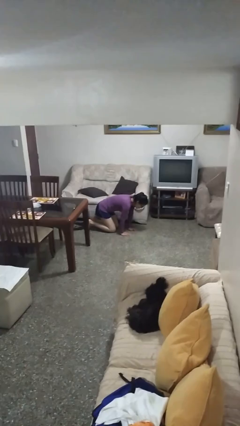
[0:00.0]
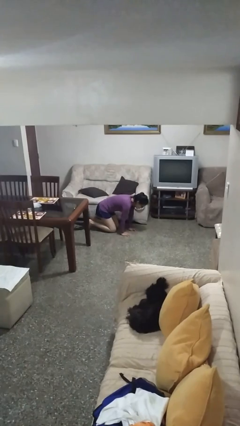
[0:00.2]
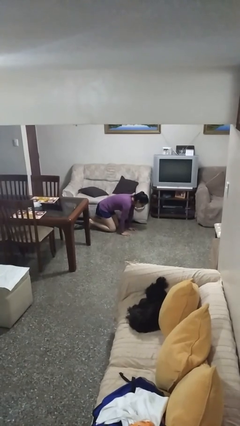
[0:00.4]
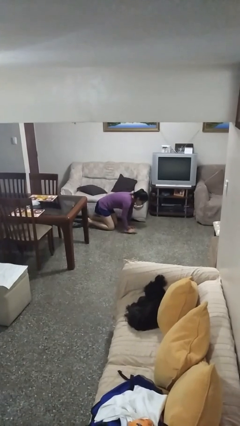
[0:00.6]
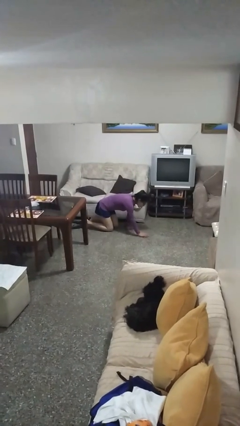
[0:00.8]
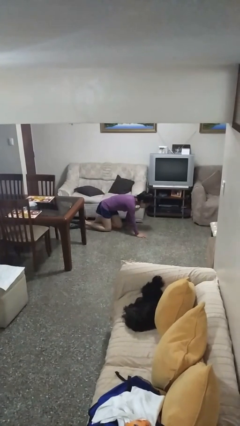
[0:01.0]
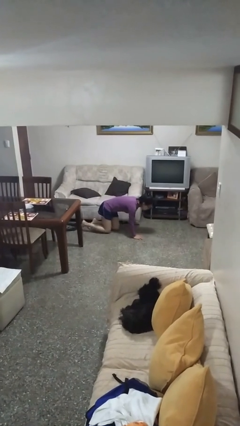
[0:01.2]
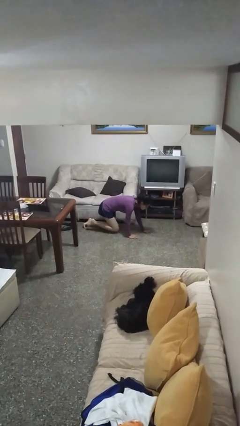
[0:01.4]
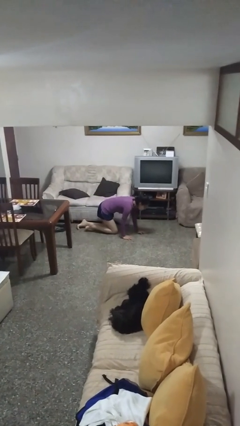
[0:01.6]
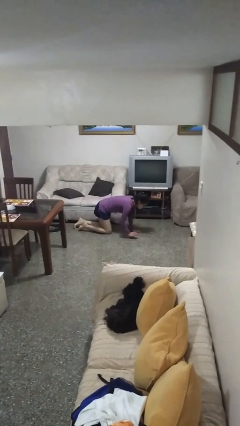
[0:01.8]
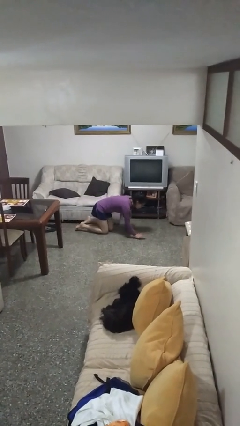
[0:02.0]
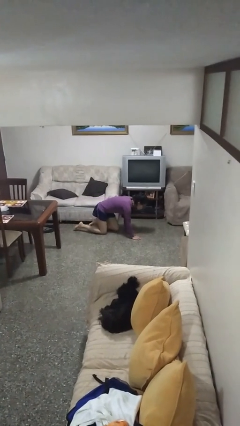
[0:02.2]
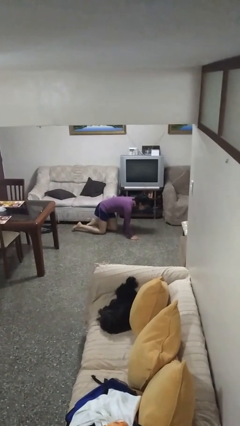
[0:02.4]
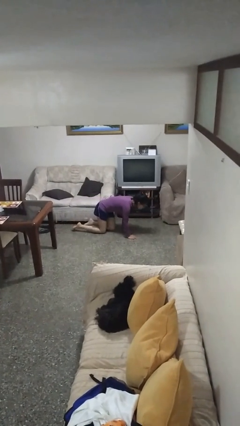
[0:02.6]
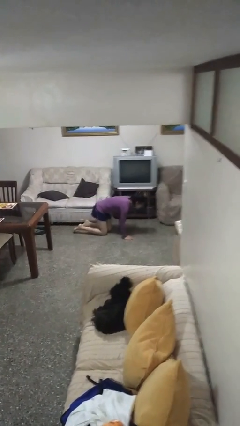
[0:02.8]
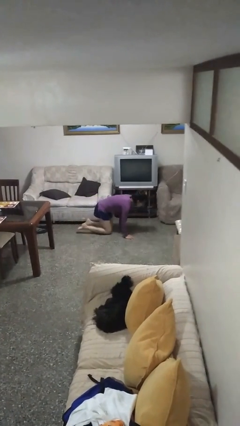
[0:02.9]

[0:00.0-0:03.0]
person crawls

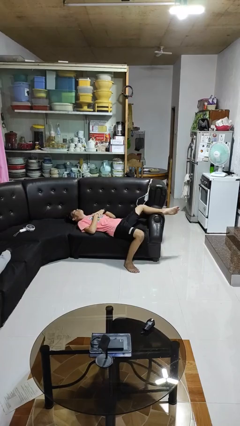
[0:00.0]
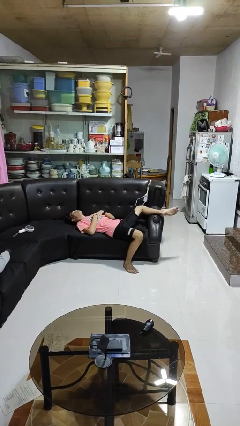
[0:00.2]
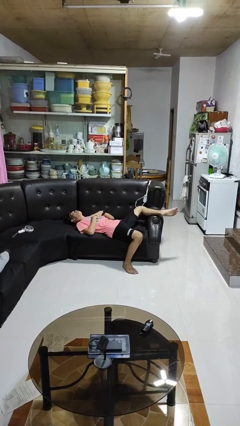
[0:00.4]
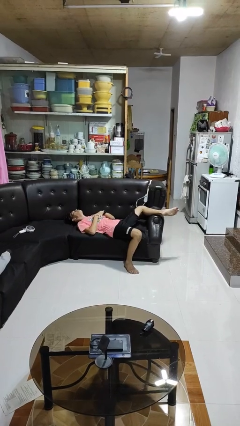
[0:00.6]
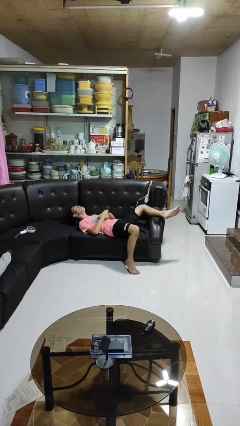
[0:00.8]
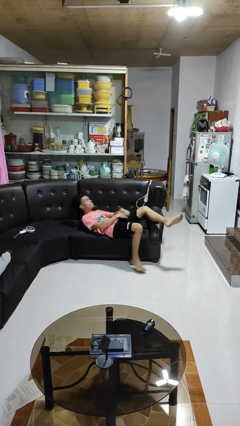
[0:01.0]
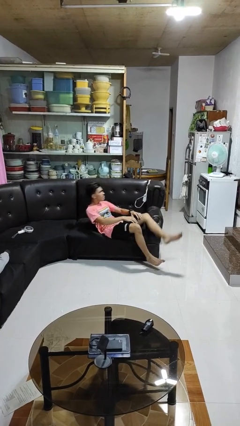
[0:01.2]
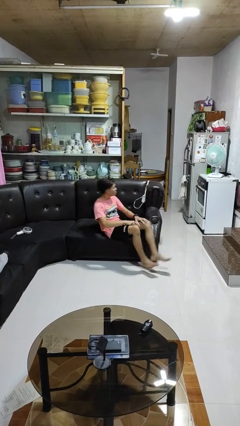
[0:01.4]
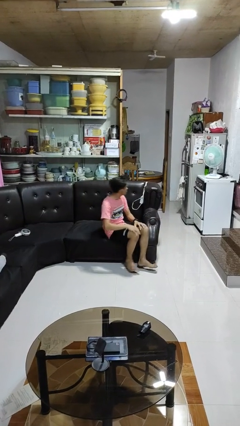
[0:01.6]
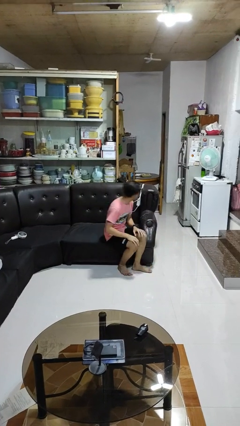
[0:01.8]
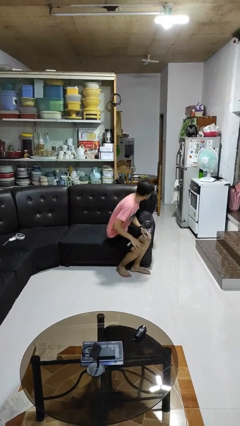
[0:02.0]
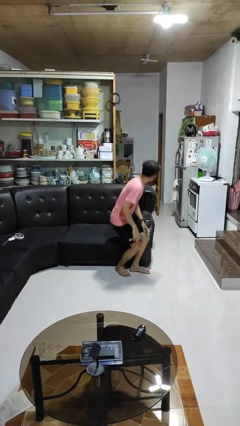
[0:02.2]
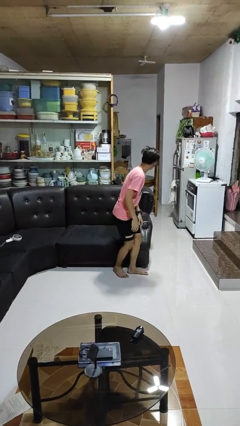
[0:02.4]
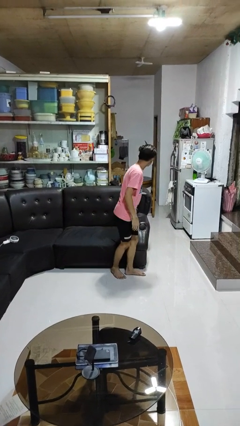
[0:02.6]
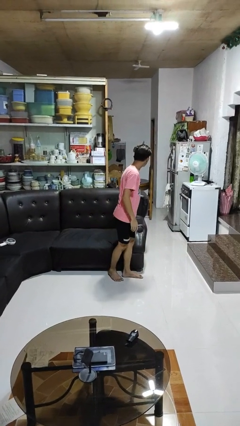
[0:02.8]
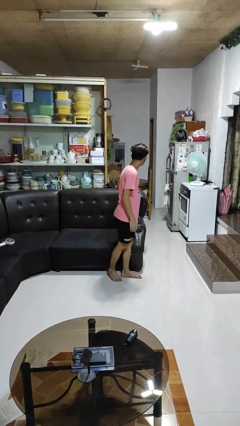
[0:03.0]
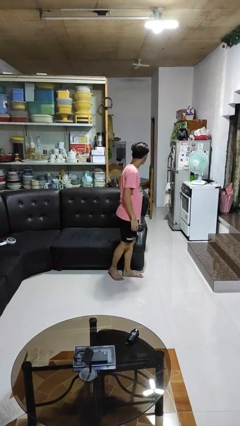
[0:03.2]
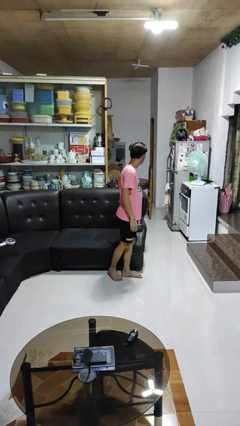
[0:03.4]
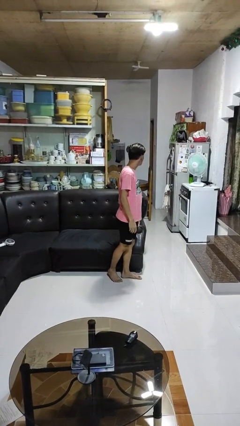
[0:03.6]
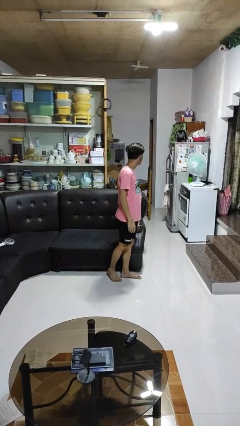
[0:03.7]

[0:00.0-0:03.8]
person stands up

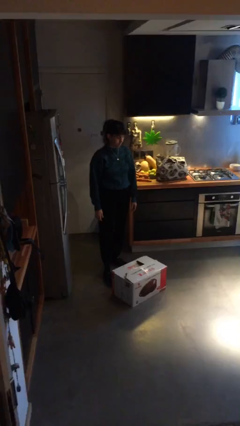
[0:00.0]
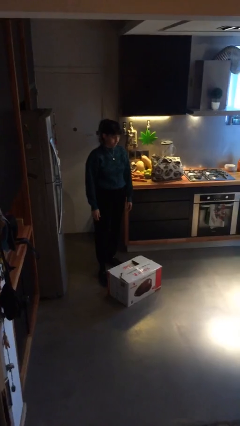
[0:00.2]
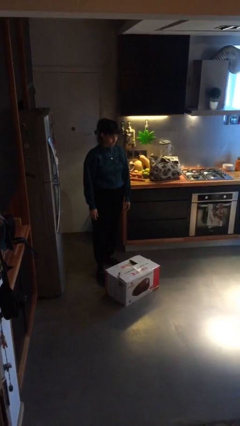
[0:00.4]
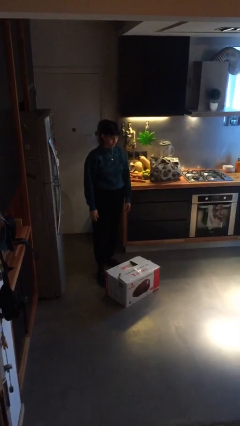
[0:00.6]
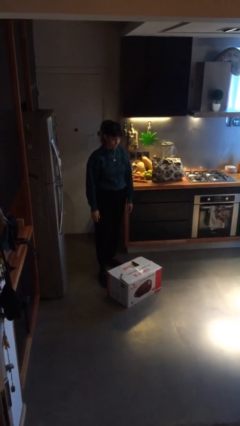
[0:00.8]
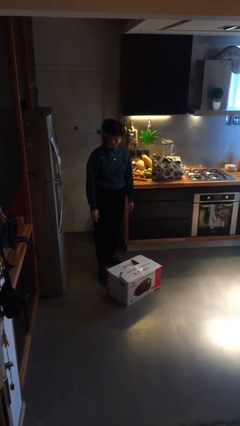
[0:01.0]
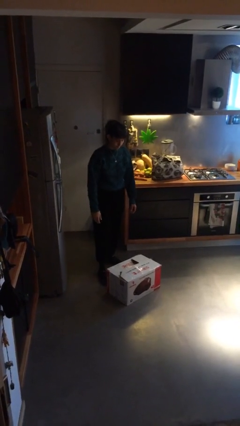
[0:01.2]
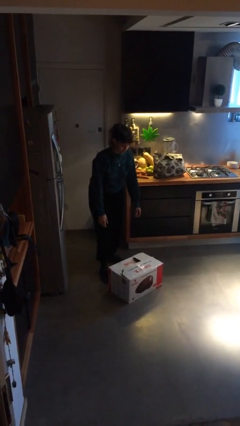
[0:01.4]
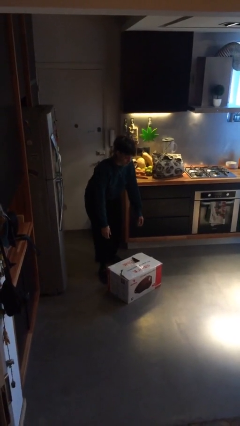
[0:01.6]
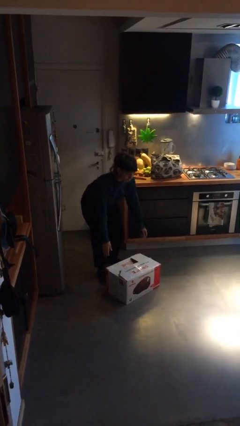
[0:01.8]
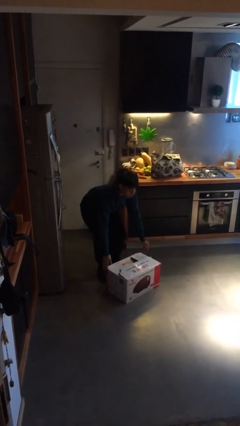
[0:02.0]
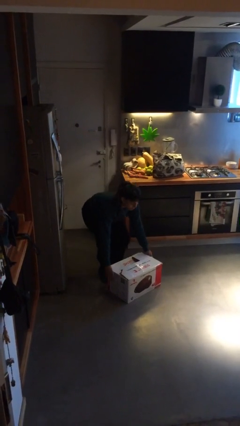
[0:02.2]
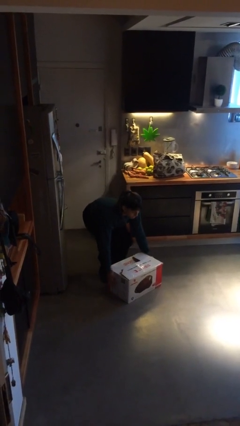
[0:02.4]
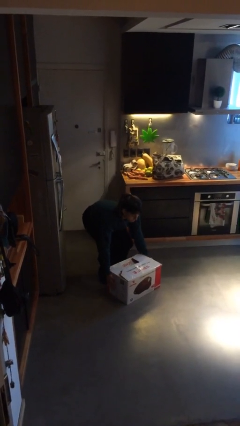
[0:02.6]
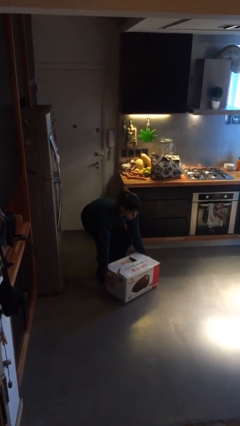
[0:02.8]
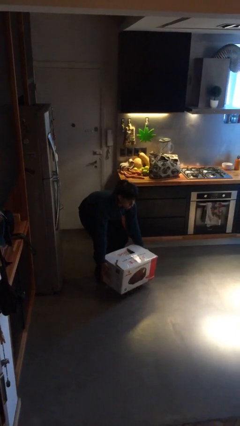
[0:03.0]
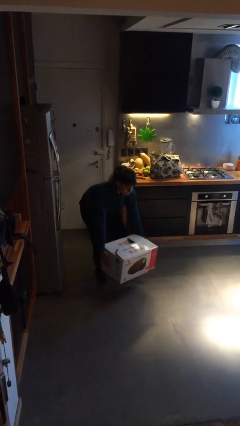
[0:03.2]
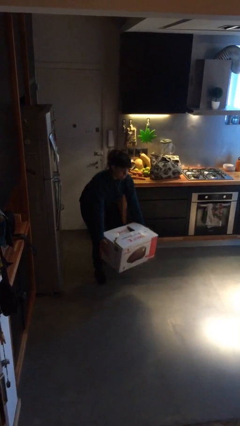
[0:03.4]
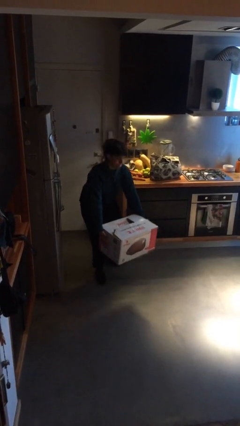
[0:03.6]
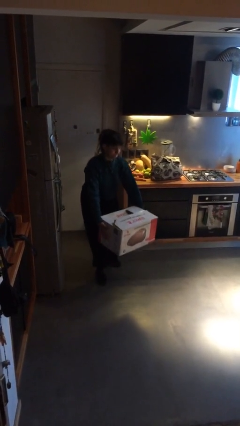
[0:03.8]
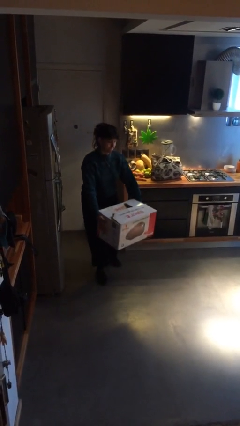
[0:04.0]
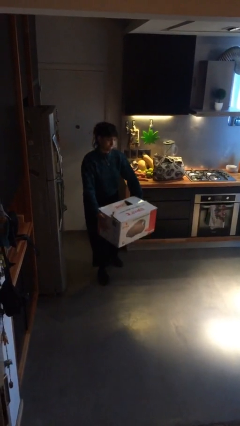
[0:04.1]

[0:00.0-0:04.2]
person picks up object from floor

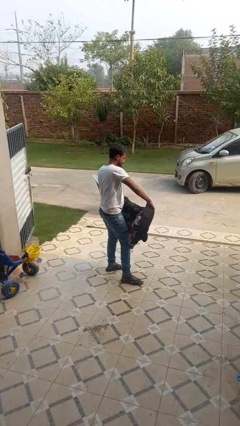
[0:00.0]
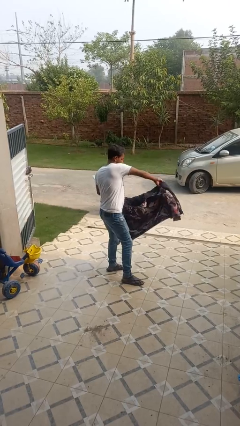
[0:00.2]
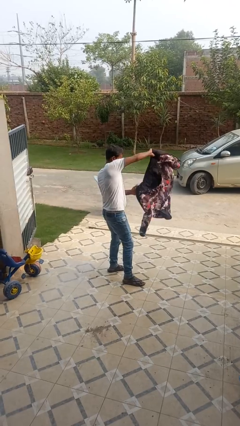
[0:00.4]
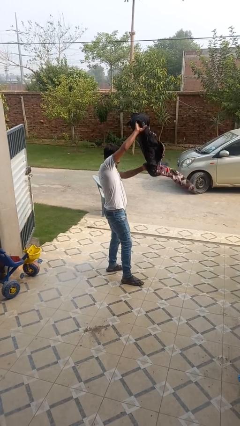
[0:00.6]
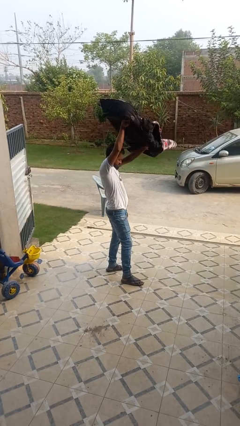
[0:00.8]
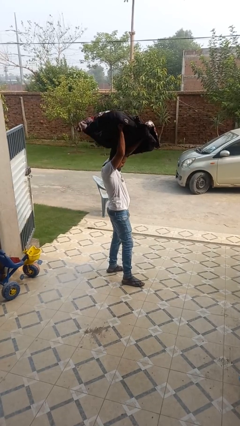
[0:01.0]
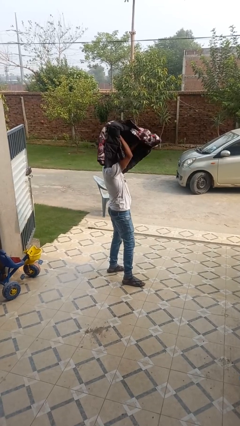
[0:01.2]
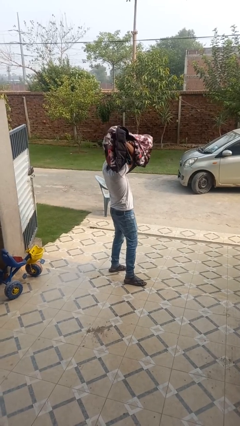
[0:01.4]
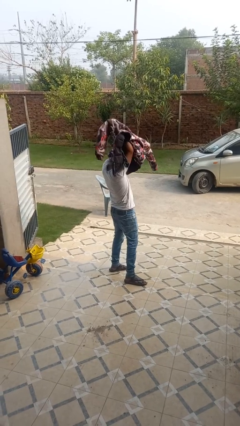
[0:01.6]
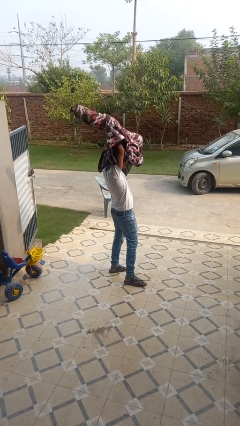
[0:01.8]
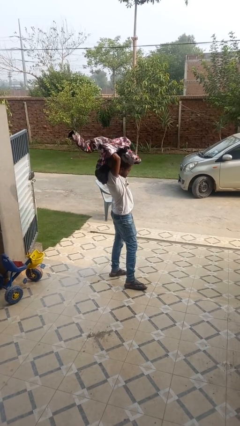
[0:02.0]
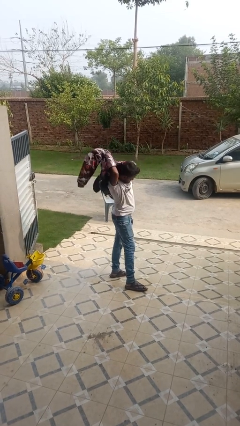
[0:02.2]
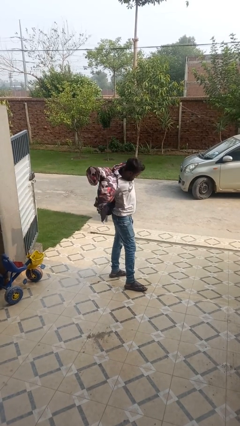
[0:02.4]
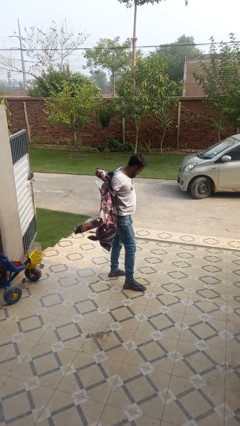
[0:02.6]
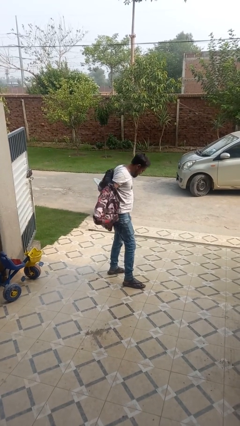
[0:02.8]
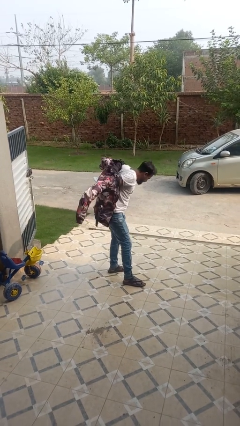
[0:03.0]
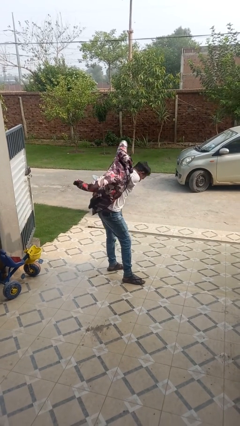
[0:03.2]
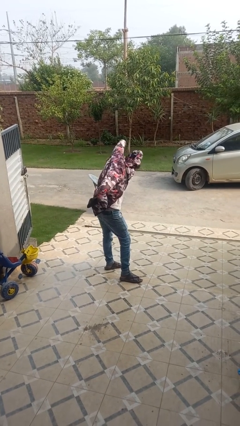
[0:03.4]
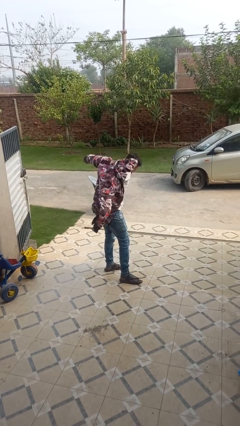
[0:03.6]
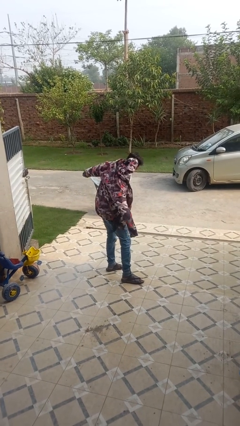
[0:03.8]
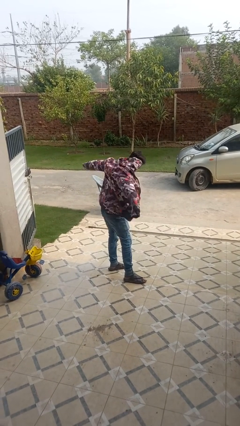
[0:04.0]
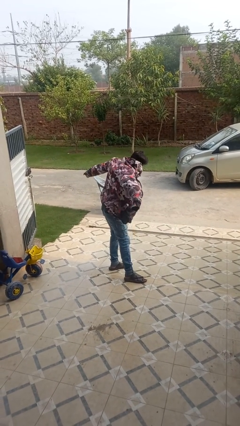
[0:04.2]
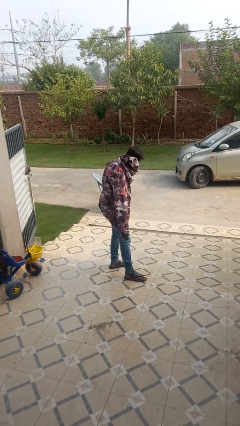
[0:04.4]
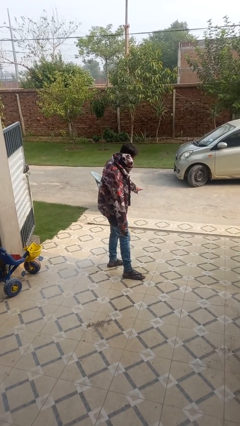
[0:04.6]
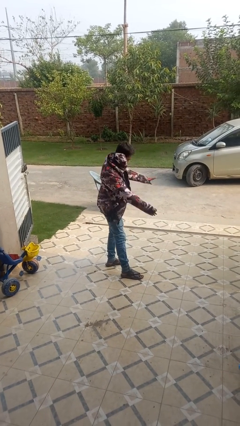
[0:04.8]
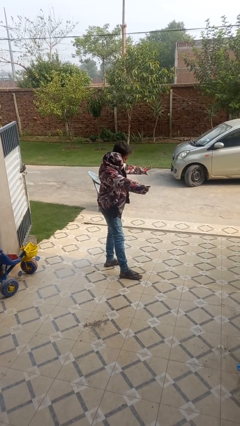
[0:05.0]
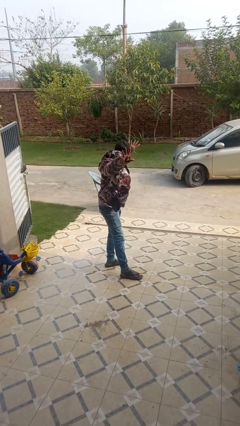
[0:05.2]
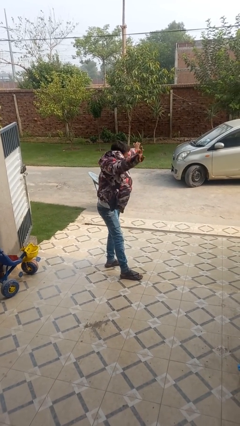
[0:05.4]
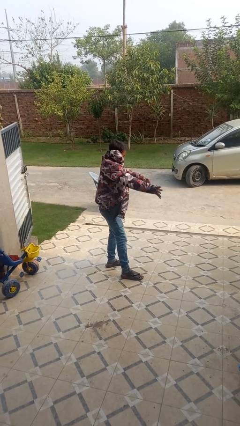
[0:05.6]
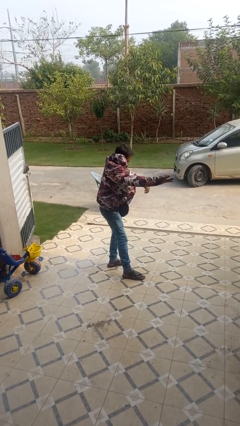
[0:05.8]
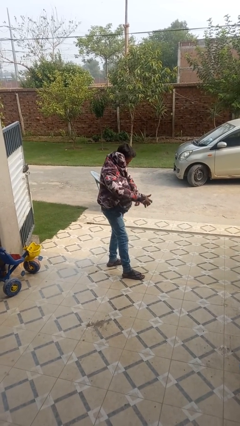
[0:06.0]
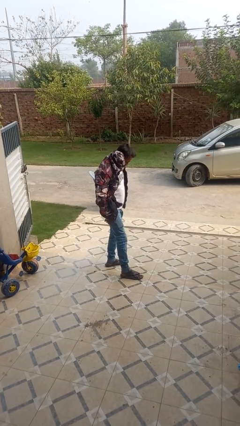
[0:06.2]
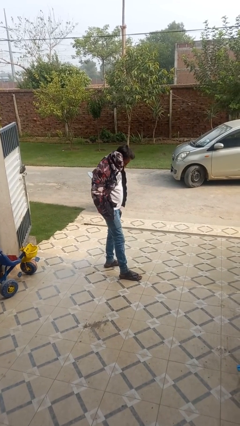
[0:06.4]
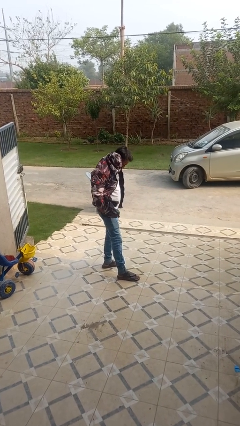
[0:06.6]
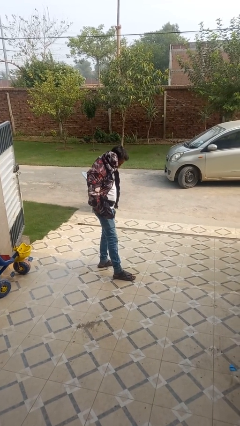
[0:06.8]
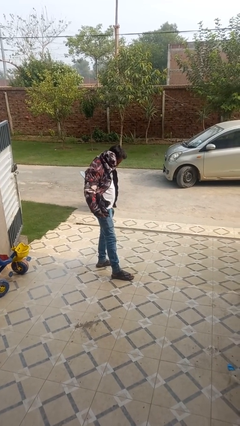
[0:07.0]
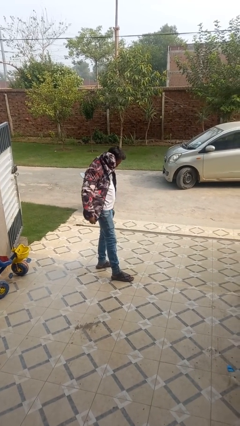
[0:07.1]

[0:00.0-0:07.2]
person puts on jacket
